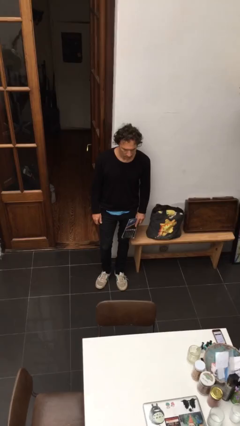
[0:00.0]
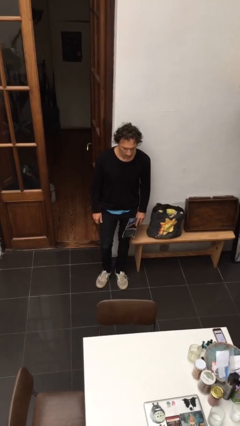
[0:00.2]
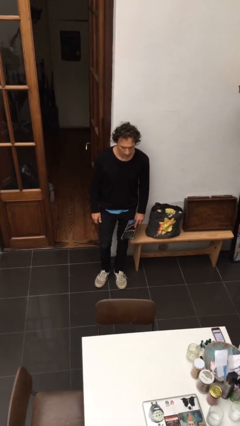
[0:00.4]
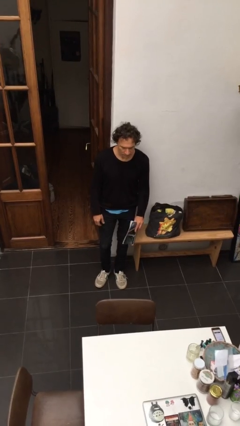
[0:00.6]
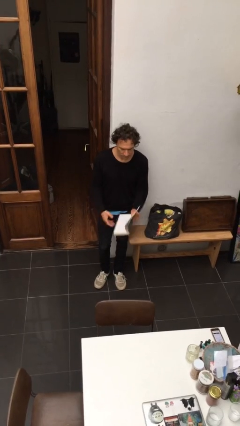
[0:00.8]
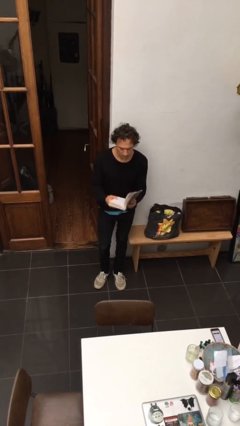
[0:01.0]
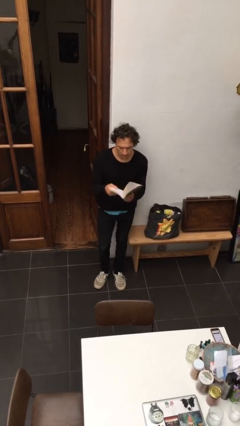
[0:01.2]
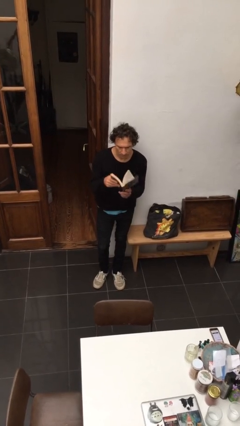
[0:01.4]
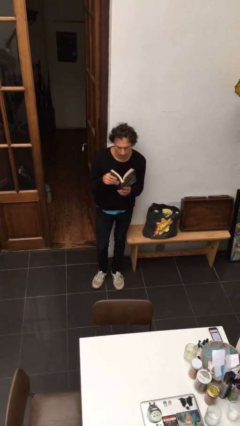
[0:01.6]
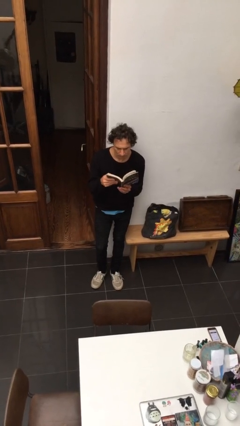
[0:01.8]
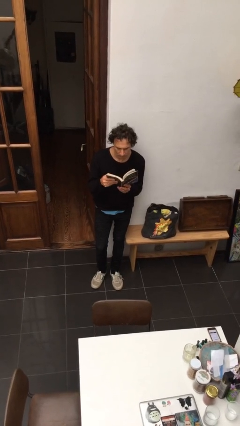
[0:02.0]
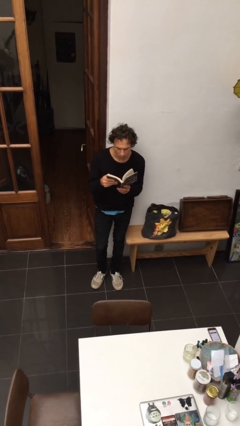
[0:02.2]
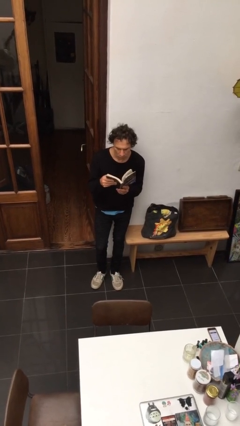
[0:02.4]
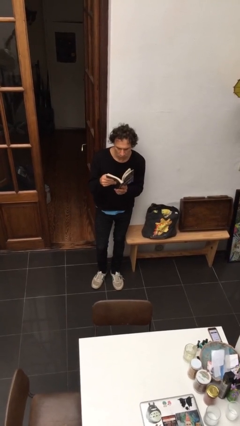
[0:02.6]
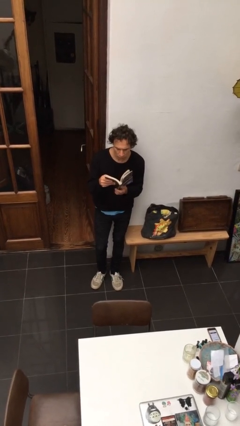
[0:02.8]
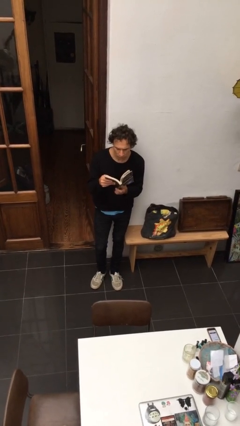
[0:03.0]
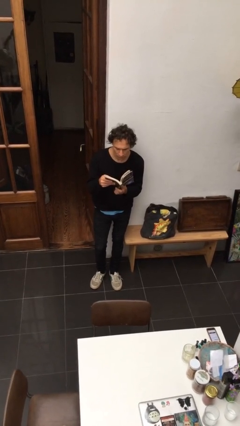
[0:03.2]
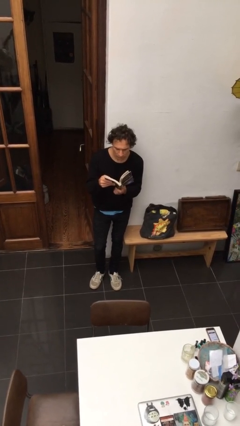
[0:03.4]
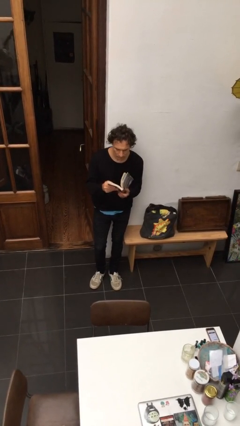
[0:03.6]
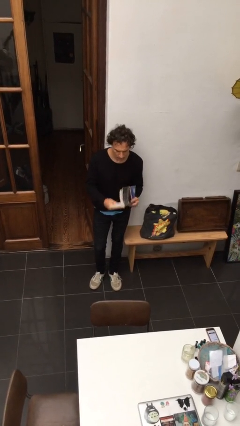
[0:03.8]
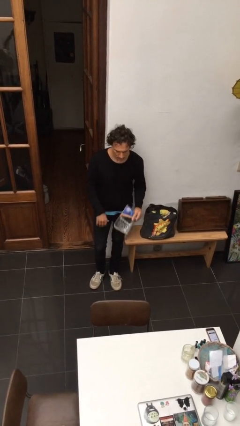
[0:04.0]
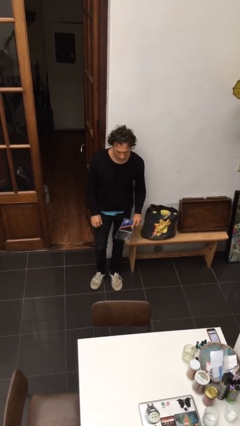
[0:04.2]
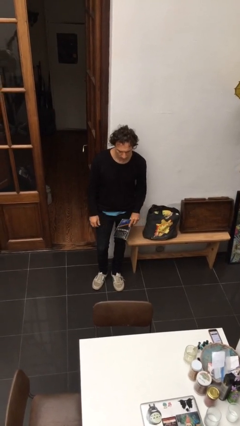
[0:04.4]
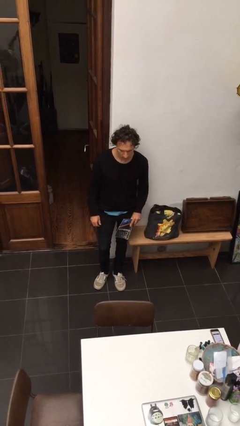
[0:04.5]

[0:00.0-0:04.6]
person reads document

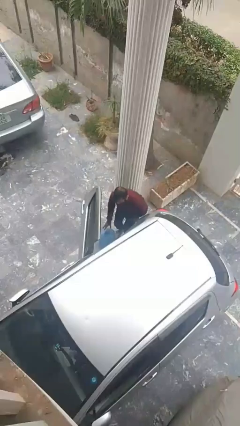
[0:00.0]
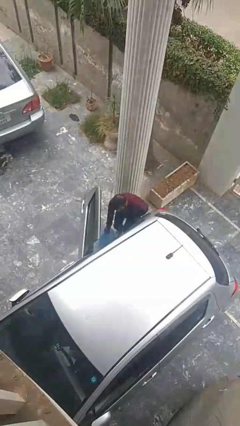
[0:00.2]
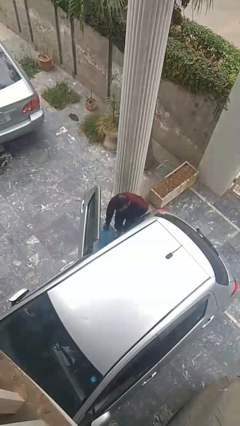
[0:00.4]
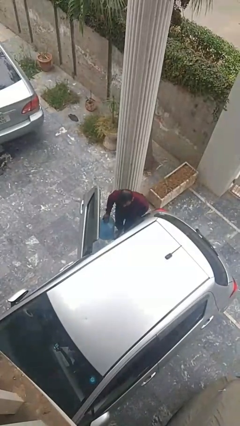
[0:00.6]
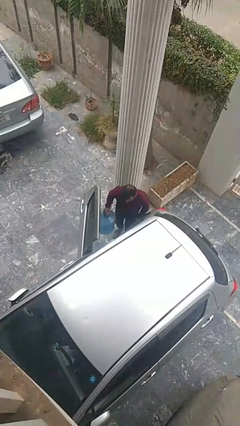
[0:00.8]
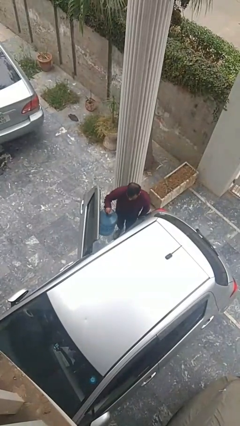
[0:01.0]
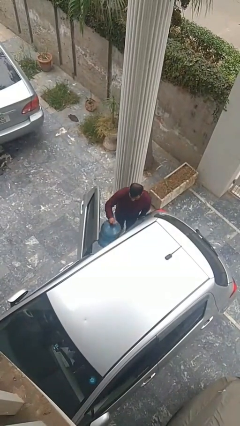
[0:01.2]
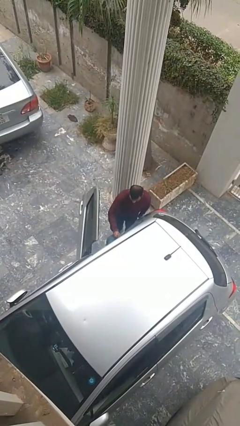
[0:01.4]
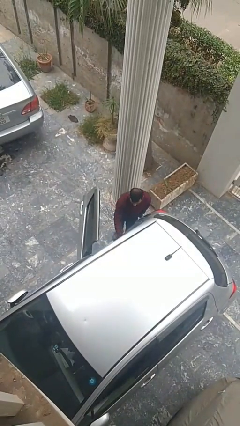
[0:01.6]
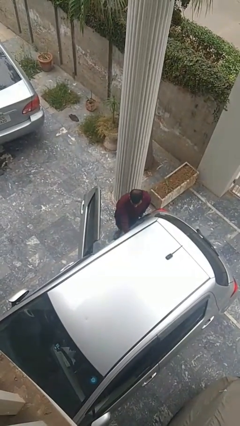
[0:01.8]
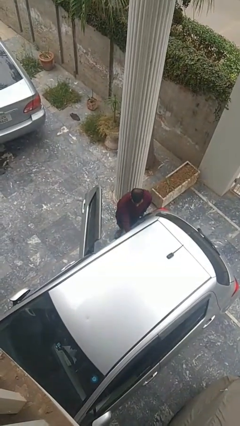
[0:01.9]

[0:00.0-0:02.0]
person loads car

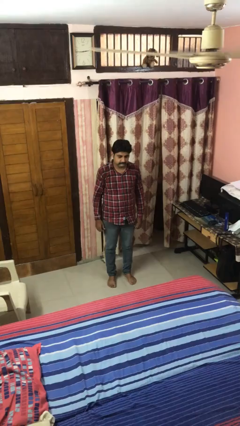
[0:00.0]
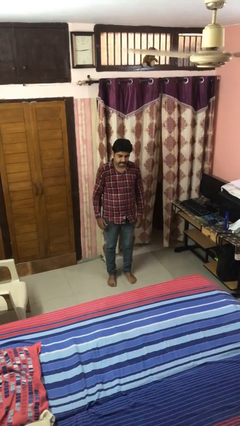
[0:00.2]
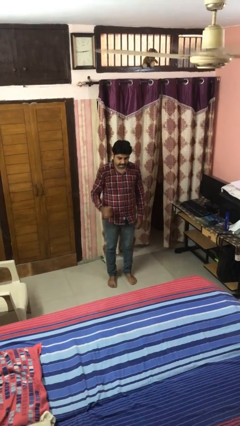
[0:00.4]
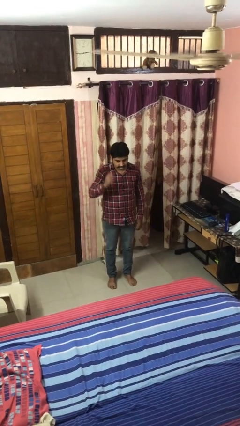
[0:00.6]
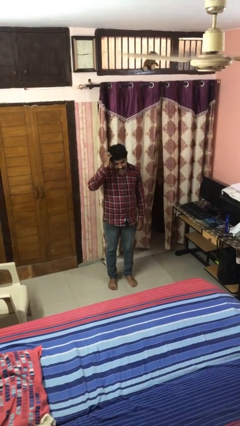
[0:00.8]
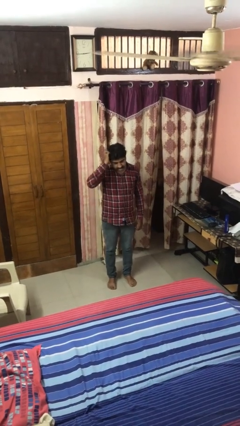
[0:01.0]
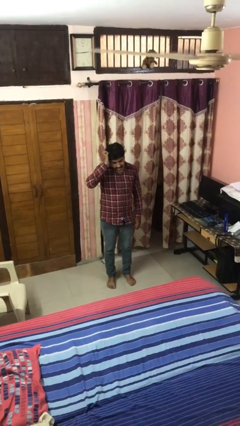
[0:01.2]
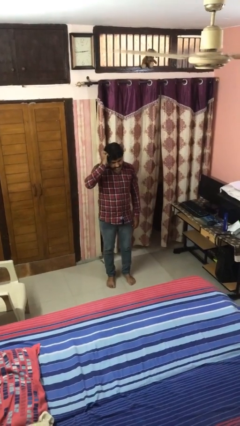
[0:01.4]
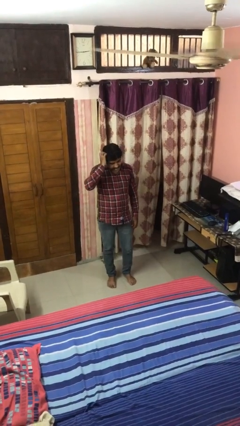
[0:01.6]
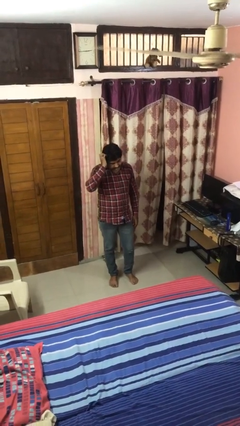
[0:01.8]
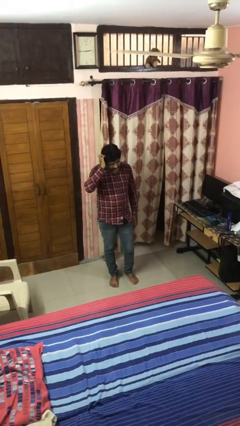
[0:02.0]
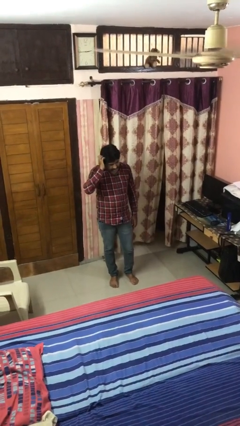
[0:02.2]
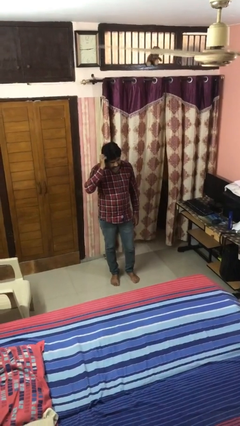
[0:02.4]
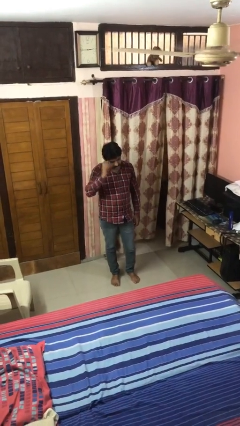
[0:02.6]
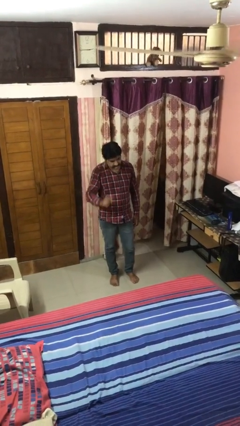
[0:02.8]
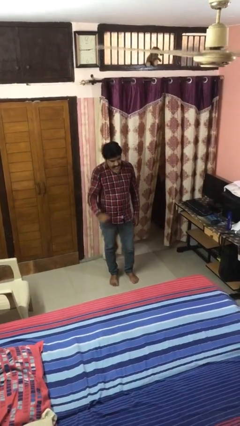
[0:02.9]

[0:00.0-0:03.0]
person scratches face

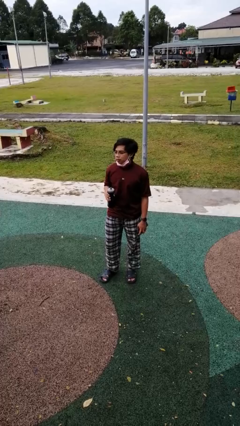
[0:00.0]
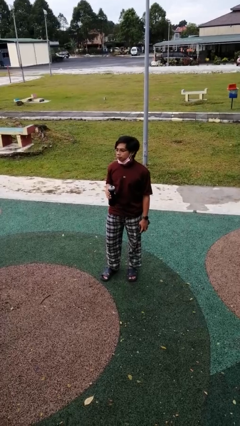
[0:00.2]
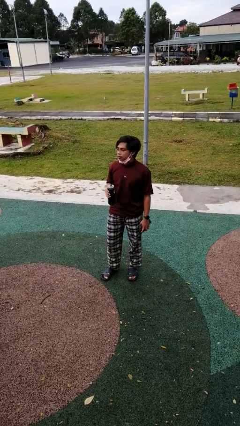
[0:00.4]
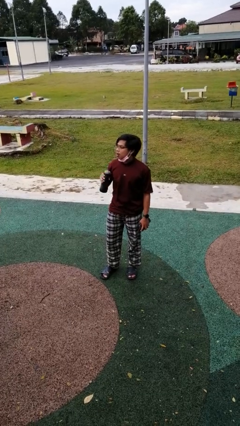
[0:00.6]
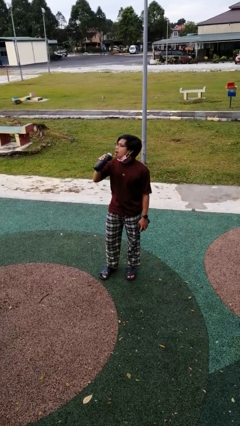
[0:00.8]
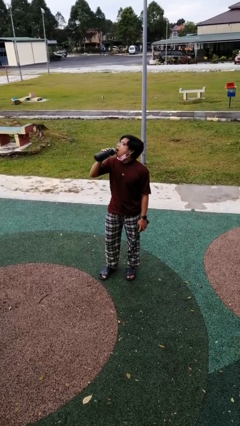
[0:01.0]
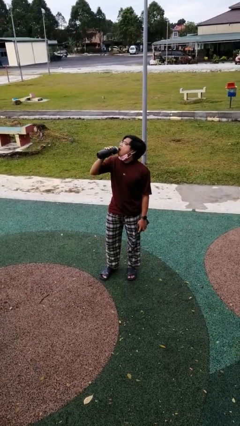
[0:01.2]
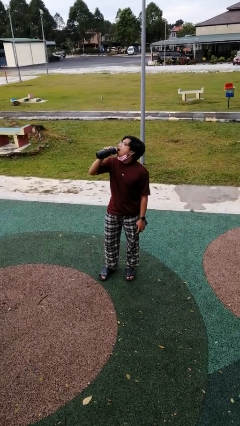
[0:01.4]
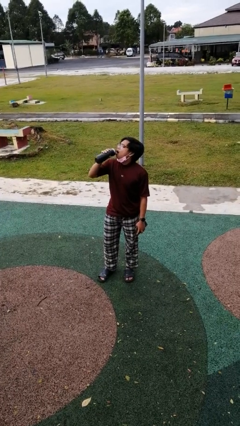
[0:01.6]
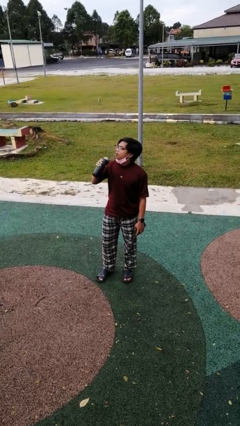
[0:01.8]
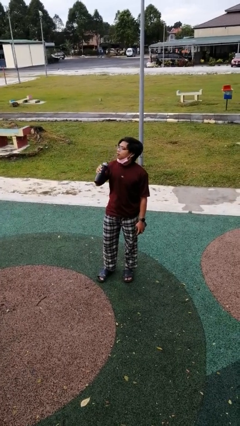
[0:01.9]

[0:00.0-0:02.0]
person drinks from bottle

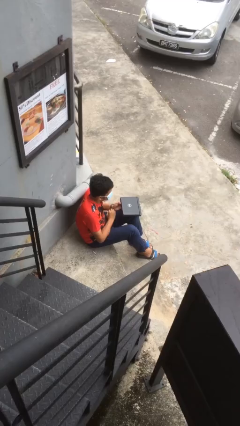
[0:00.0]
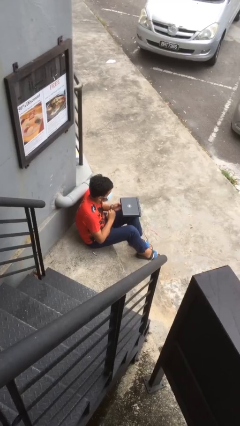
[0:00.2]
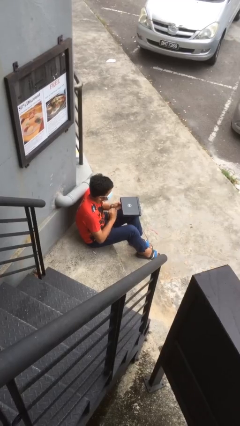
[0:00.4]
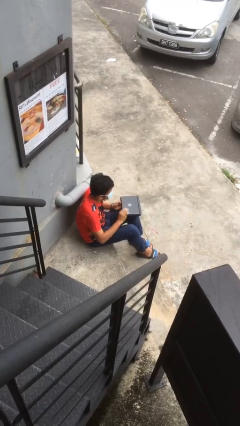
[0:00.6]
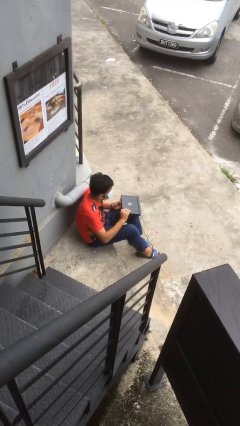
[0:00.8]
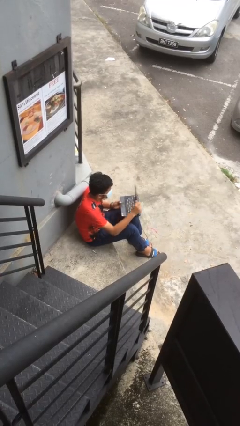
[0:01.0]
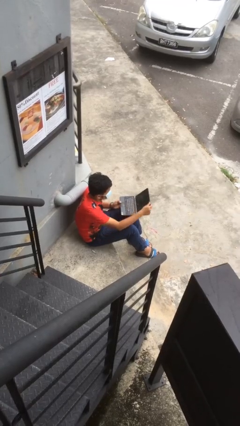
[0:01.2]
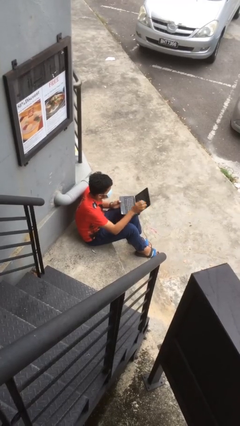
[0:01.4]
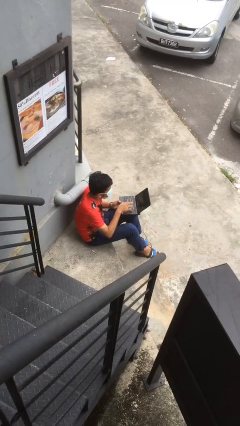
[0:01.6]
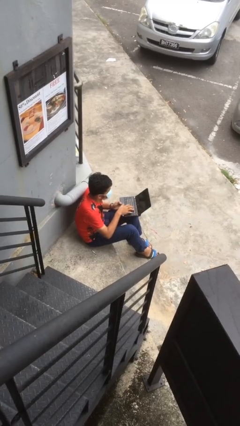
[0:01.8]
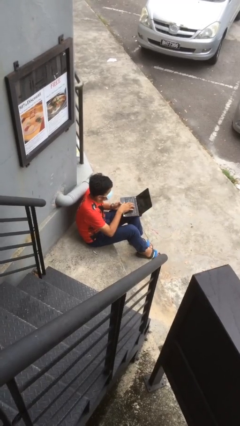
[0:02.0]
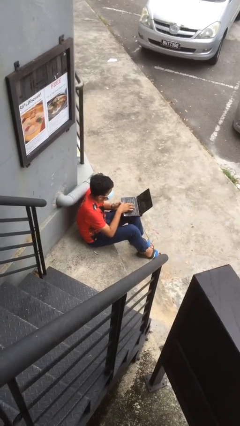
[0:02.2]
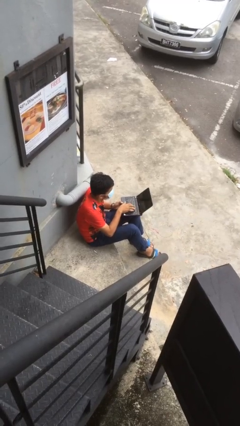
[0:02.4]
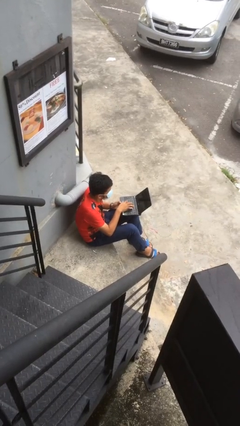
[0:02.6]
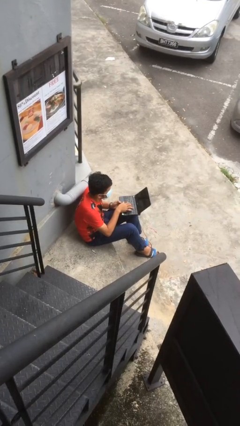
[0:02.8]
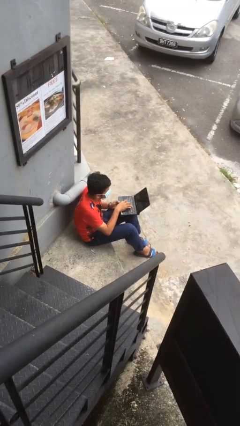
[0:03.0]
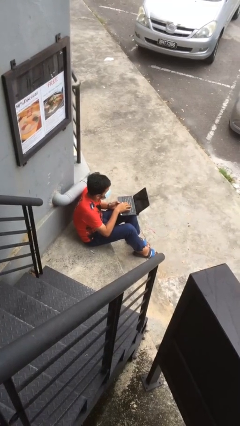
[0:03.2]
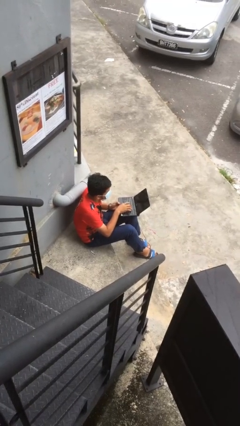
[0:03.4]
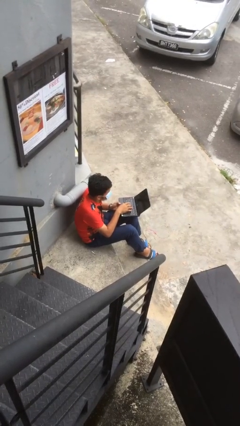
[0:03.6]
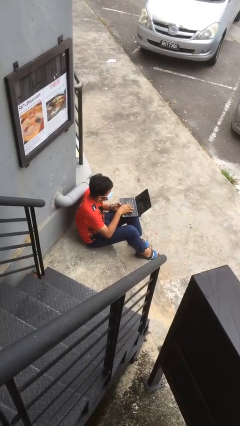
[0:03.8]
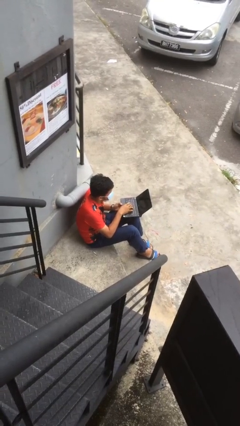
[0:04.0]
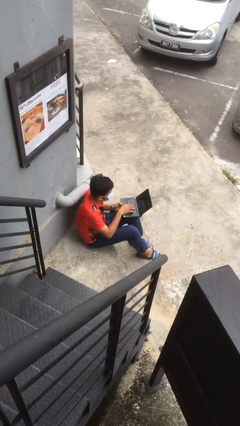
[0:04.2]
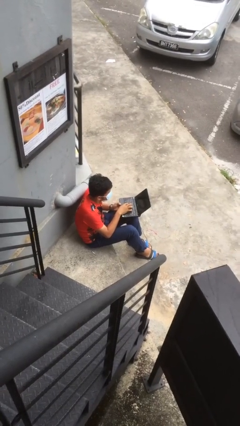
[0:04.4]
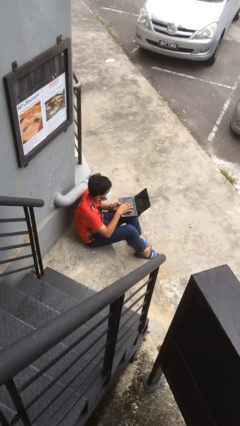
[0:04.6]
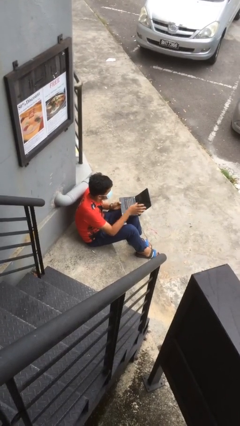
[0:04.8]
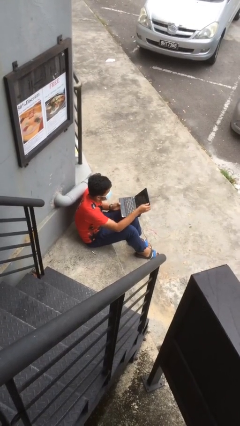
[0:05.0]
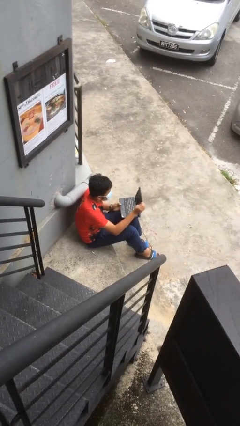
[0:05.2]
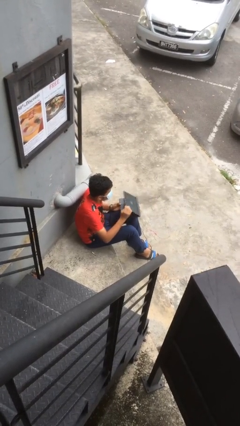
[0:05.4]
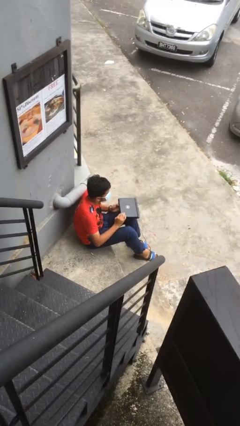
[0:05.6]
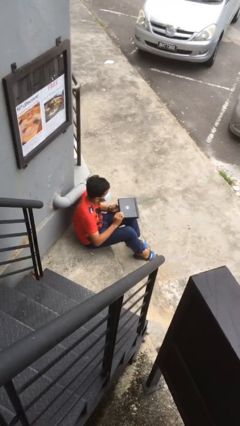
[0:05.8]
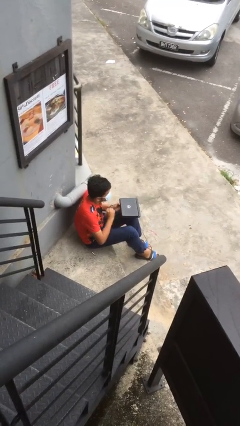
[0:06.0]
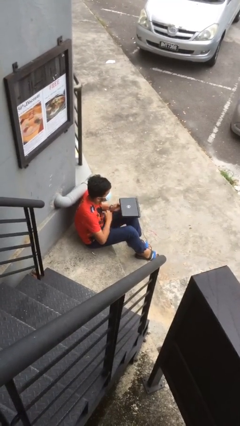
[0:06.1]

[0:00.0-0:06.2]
person interacts with laptop
